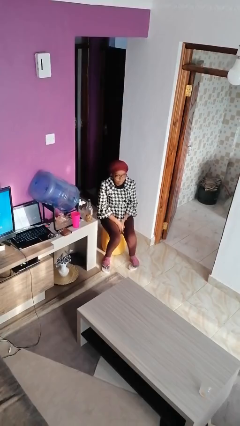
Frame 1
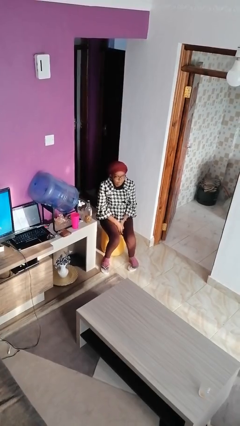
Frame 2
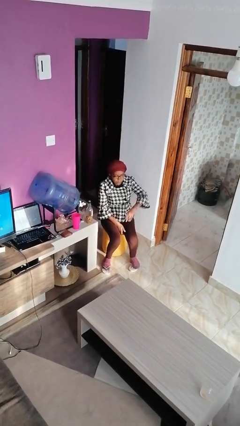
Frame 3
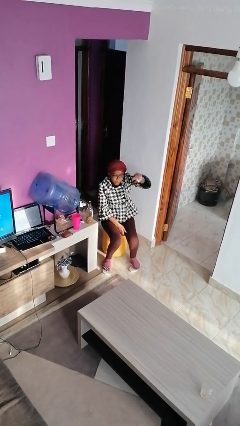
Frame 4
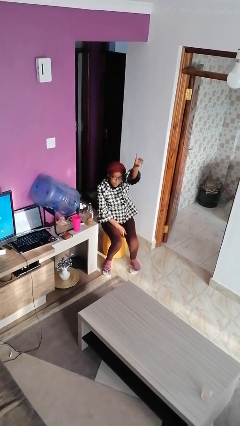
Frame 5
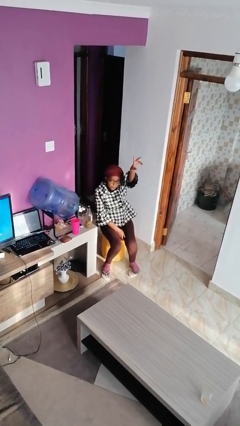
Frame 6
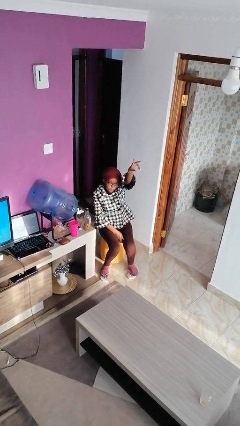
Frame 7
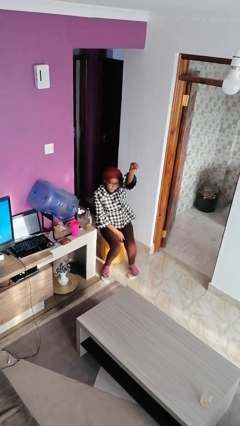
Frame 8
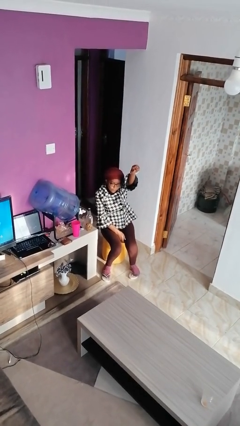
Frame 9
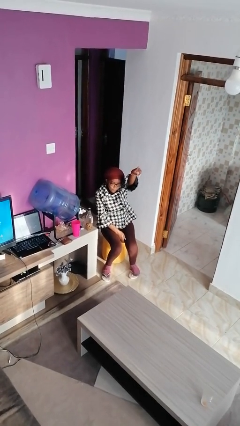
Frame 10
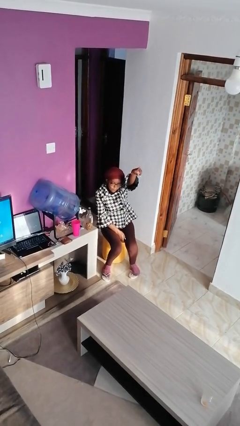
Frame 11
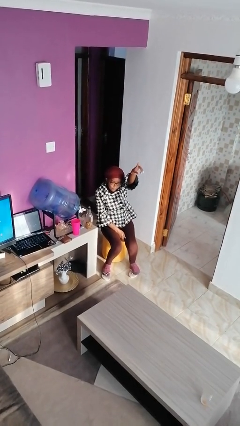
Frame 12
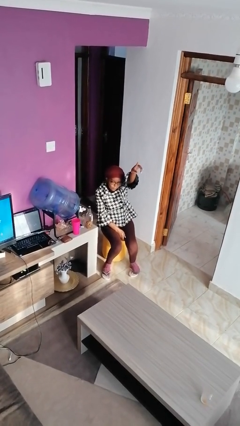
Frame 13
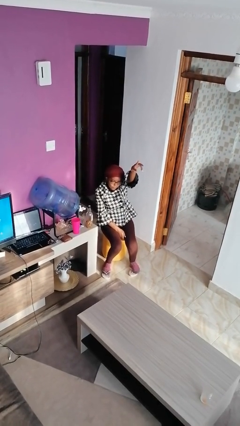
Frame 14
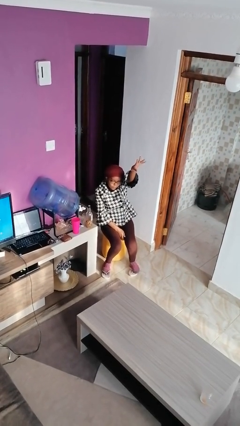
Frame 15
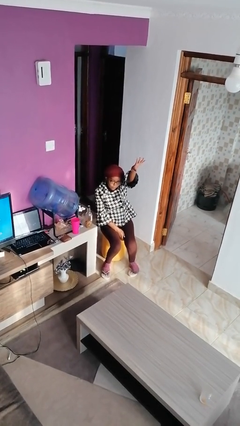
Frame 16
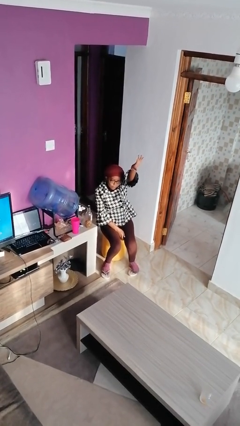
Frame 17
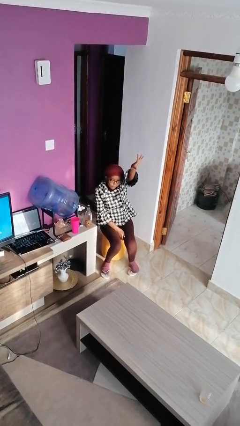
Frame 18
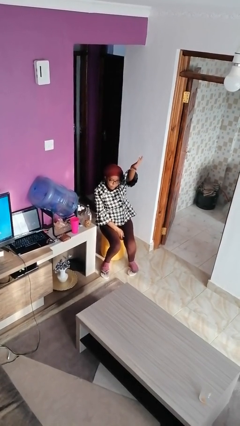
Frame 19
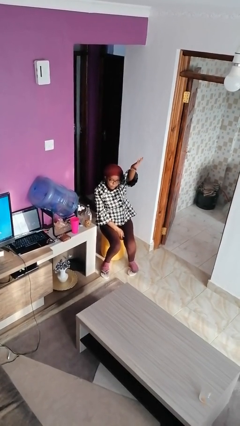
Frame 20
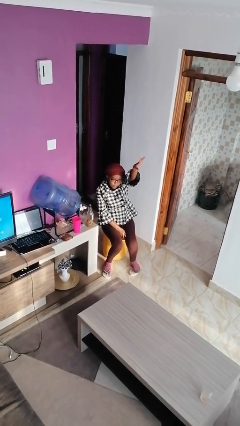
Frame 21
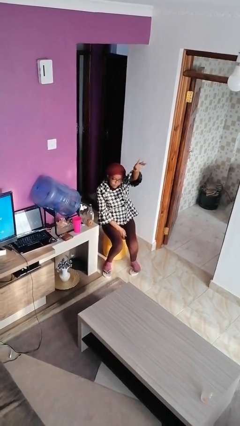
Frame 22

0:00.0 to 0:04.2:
person gestures raise hand

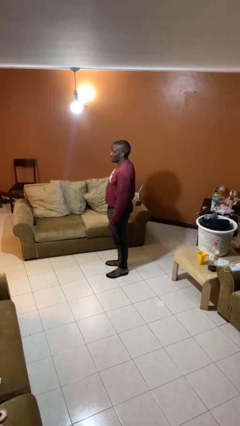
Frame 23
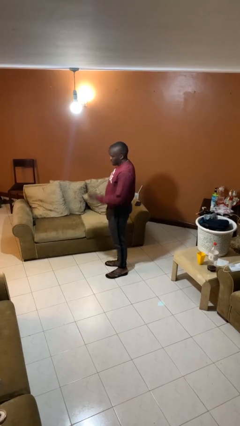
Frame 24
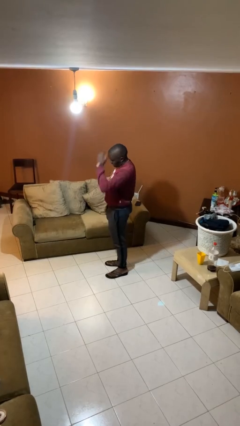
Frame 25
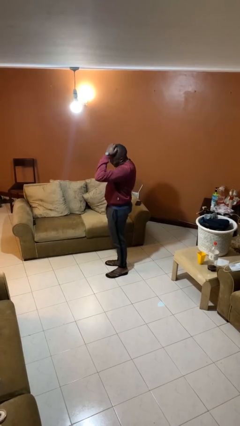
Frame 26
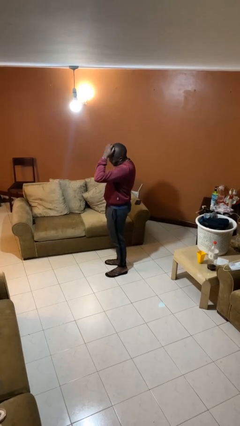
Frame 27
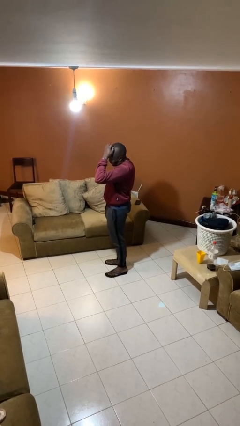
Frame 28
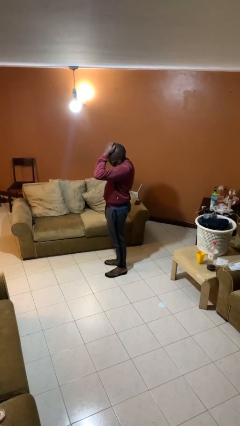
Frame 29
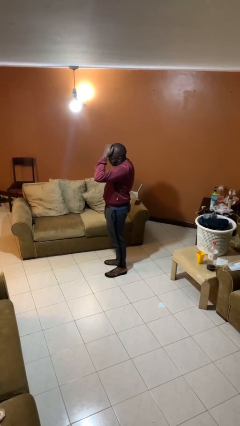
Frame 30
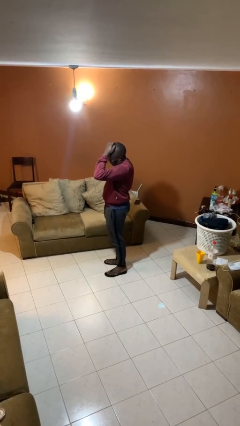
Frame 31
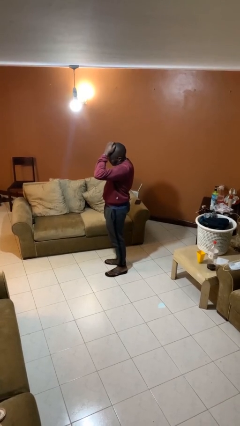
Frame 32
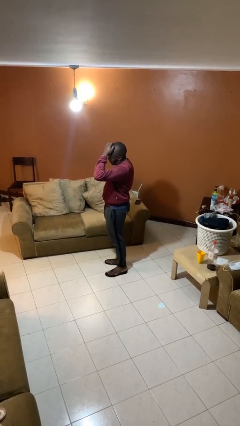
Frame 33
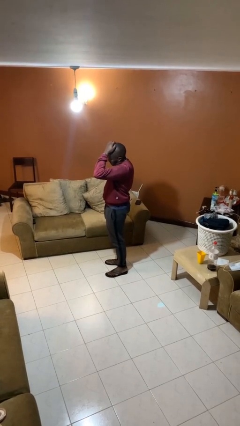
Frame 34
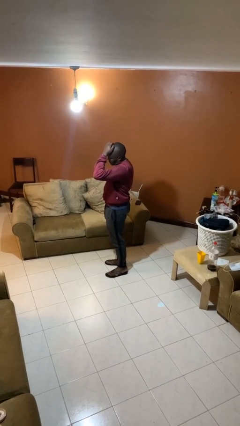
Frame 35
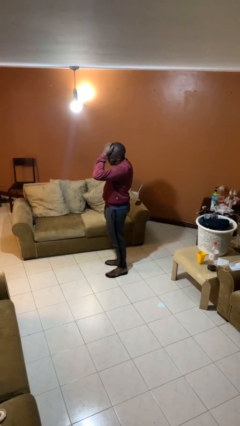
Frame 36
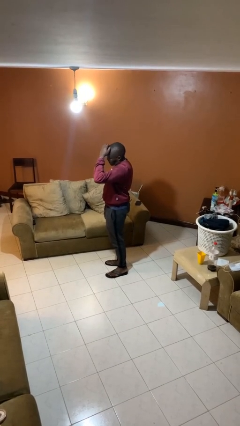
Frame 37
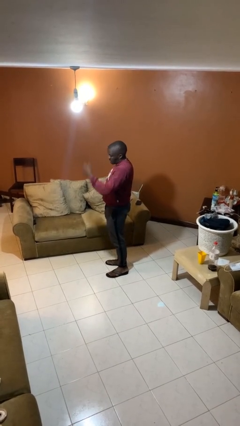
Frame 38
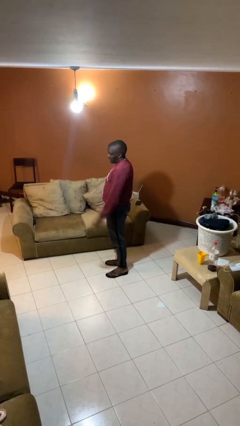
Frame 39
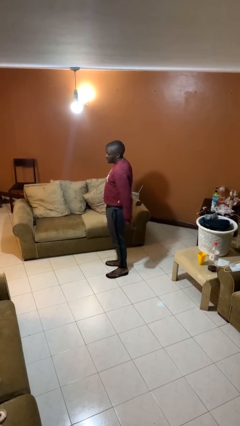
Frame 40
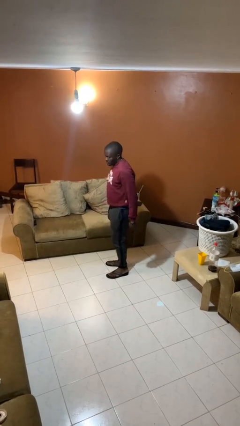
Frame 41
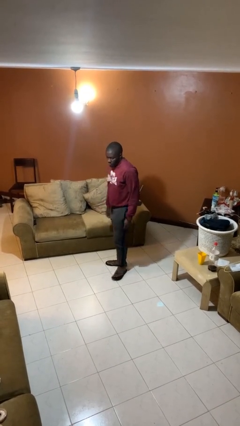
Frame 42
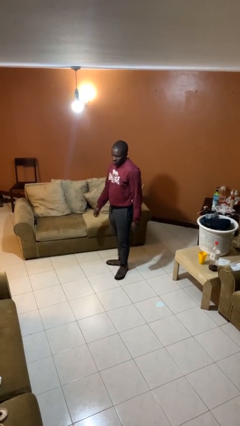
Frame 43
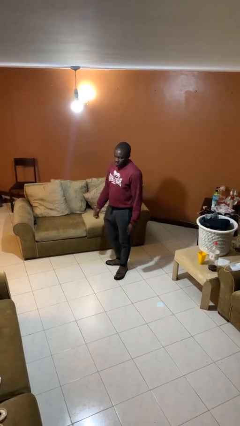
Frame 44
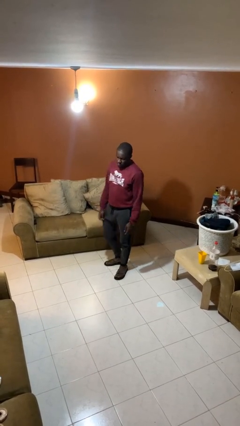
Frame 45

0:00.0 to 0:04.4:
person scratches face

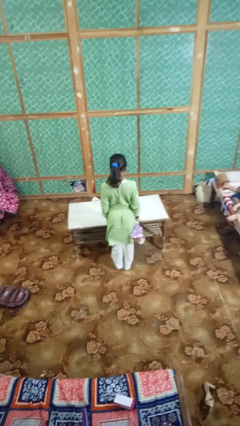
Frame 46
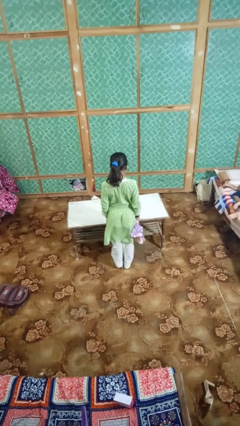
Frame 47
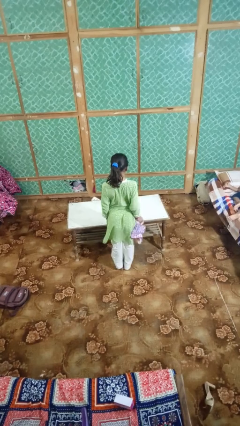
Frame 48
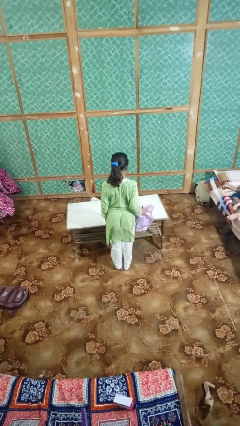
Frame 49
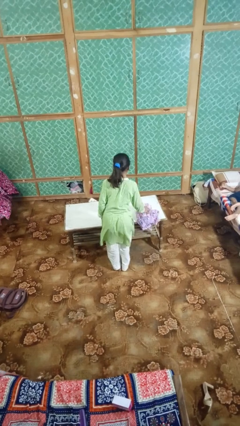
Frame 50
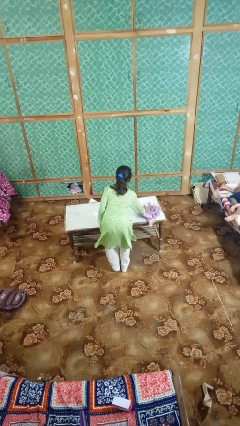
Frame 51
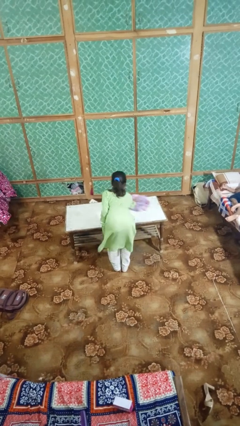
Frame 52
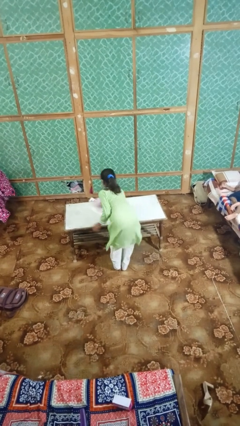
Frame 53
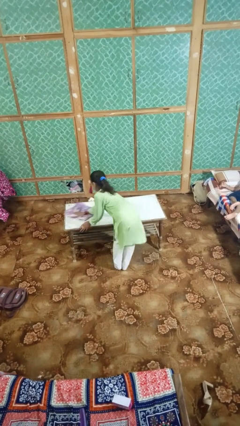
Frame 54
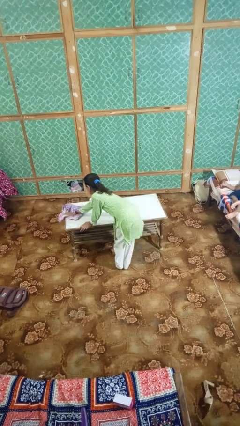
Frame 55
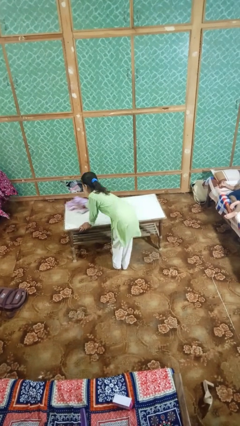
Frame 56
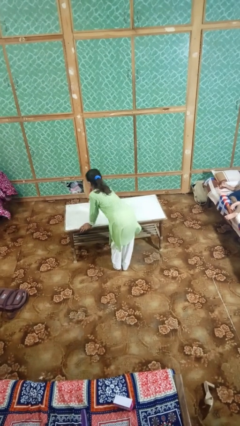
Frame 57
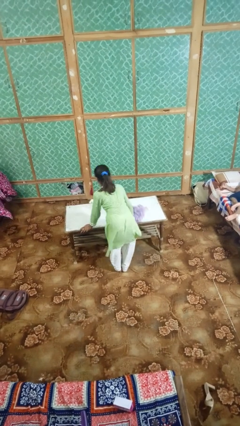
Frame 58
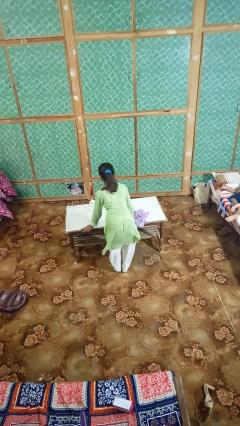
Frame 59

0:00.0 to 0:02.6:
person cleans table with rag

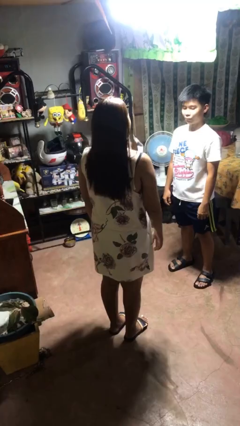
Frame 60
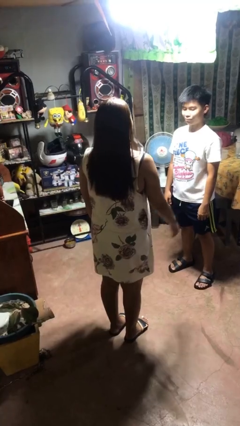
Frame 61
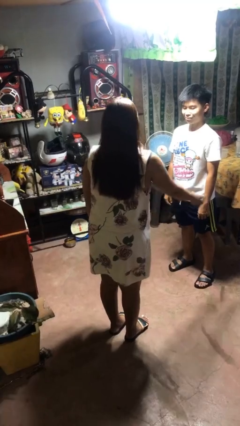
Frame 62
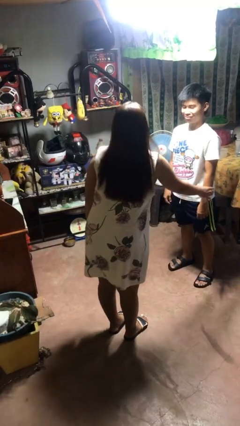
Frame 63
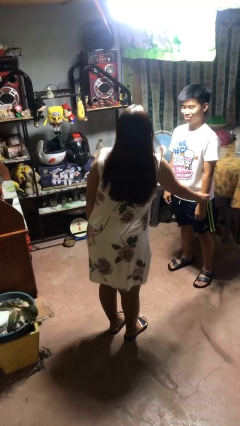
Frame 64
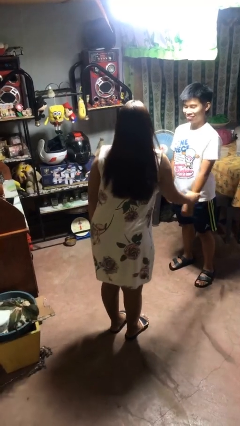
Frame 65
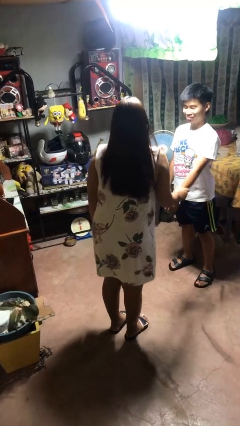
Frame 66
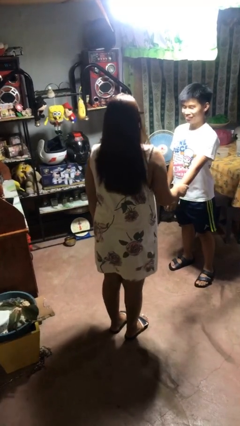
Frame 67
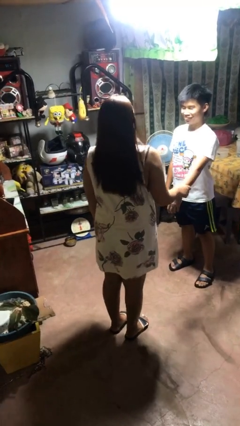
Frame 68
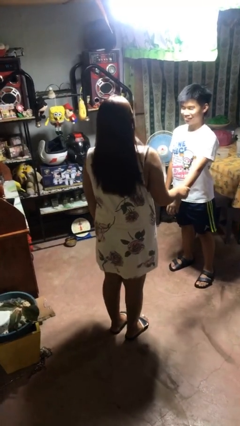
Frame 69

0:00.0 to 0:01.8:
person grabs person by forearm

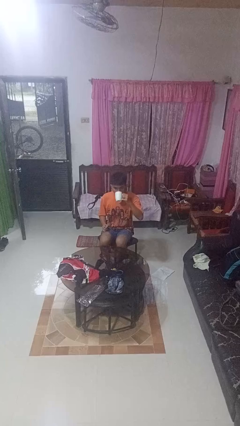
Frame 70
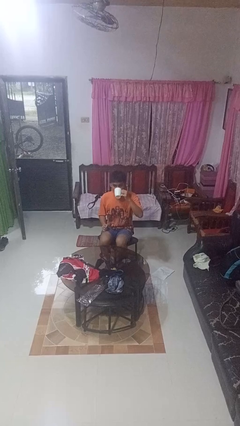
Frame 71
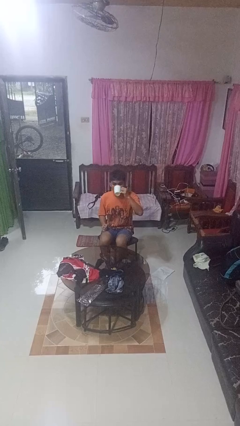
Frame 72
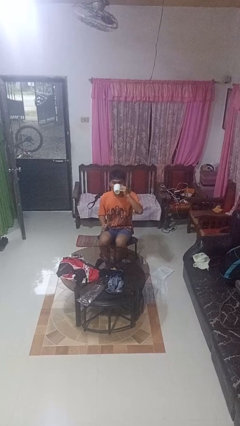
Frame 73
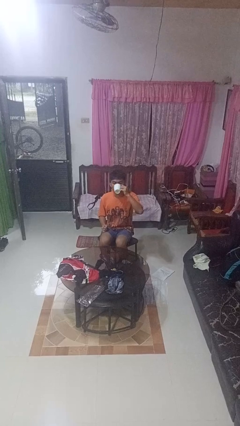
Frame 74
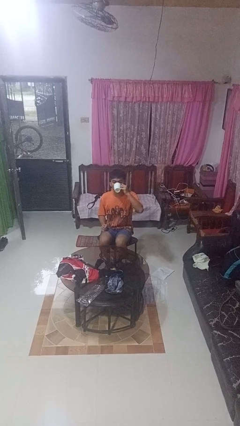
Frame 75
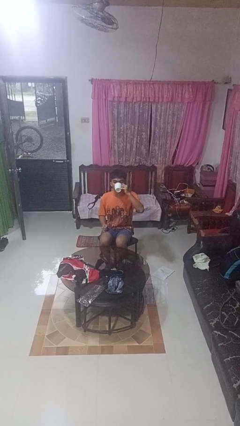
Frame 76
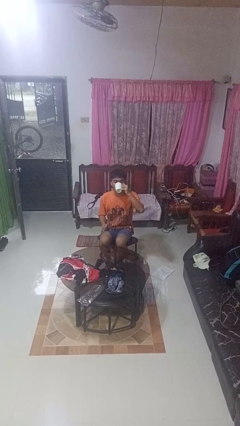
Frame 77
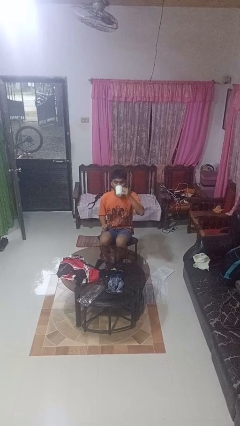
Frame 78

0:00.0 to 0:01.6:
person drinks from mug

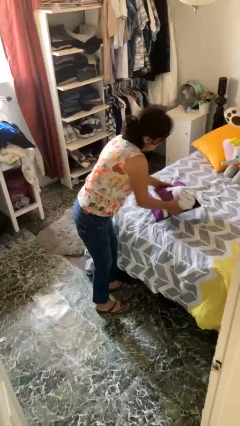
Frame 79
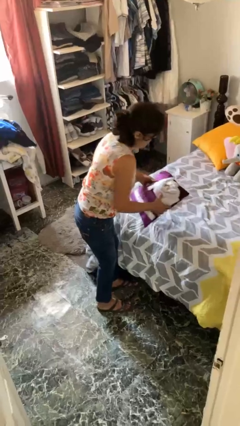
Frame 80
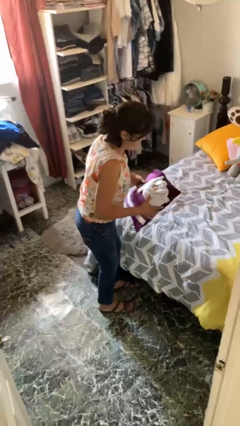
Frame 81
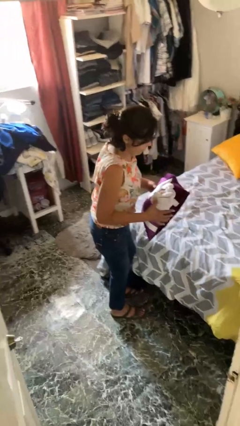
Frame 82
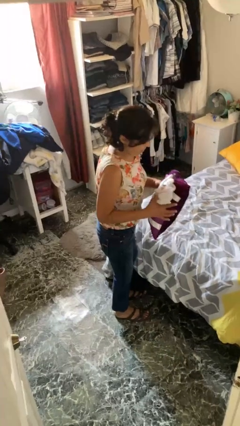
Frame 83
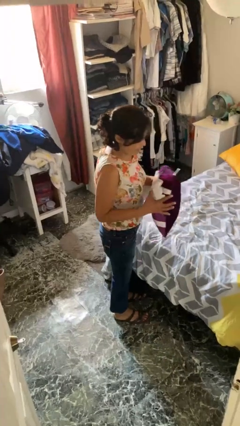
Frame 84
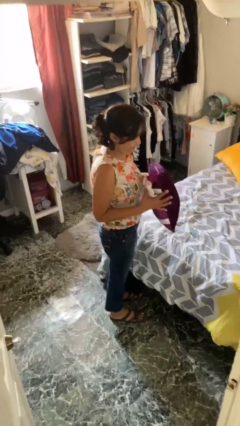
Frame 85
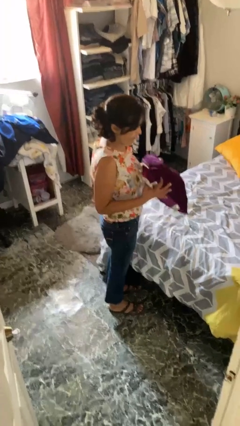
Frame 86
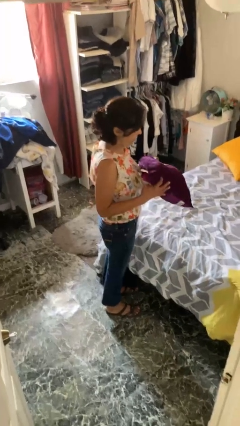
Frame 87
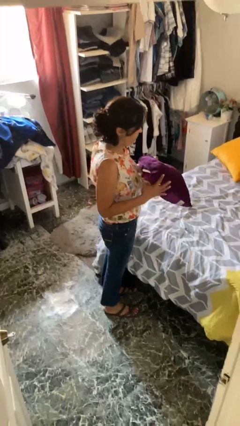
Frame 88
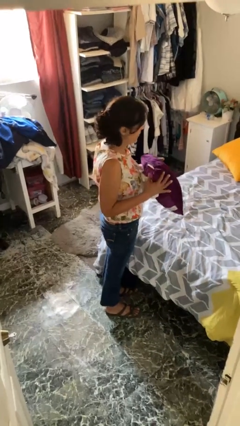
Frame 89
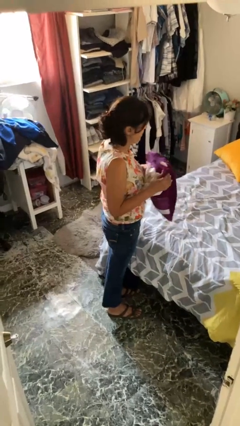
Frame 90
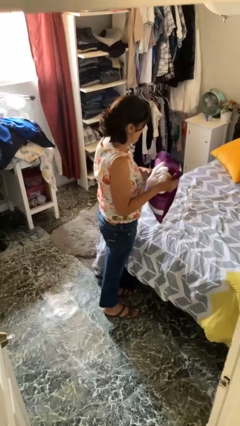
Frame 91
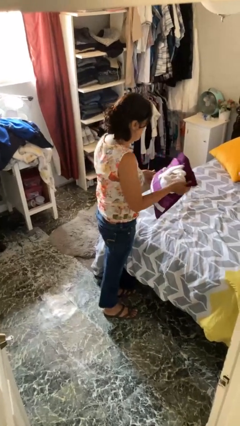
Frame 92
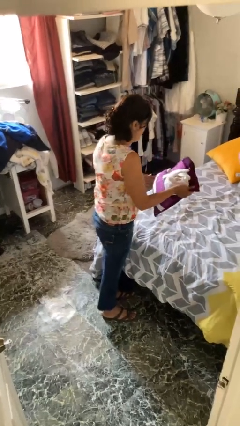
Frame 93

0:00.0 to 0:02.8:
person picks up object from bed

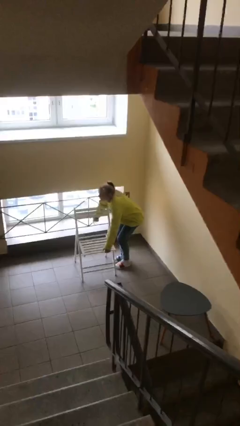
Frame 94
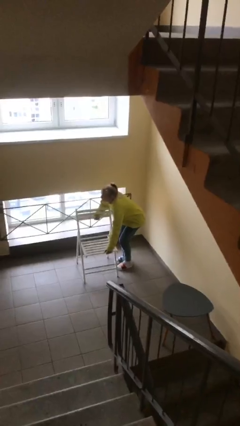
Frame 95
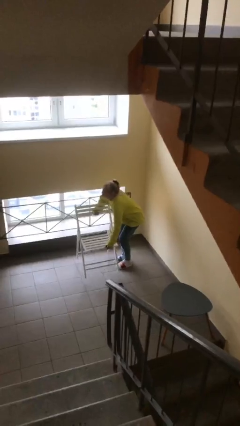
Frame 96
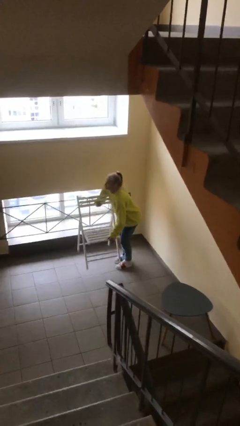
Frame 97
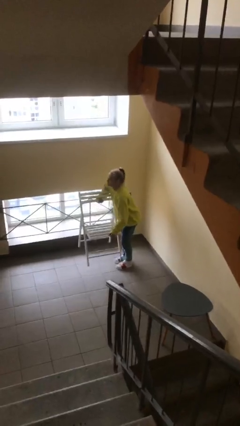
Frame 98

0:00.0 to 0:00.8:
person picks up object from floor
